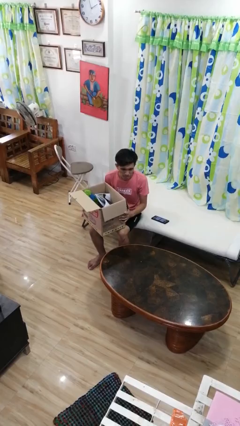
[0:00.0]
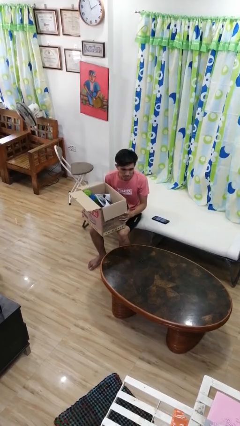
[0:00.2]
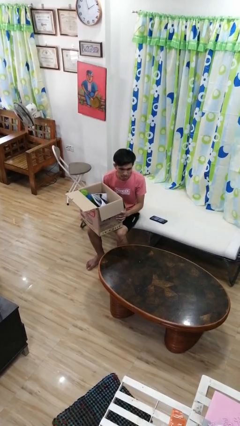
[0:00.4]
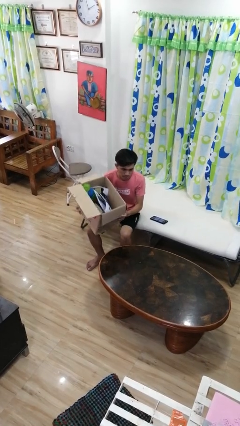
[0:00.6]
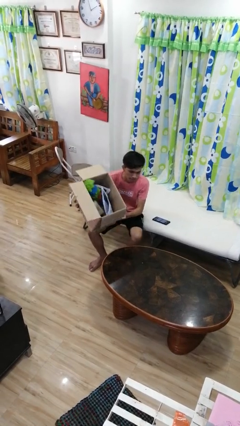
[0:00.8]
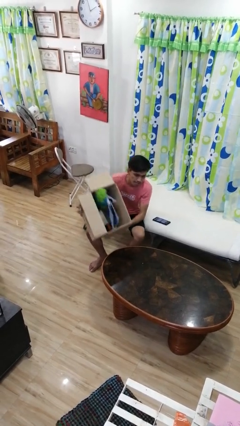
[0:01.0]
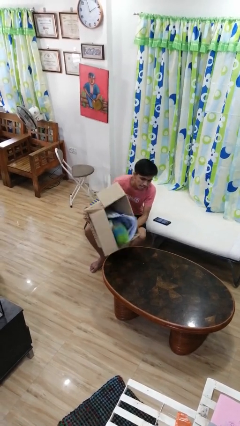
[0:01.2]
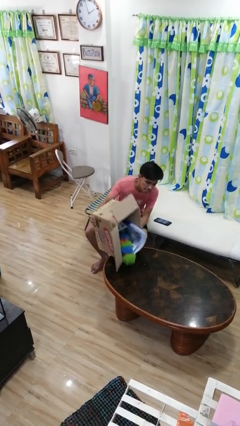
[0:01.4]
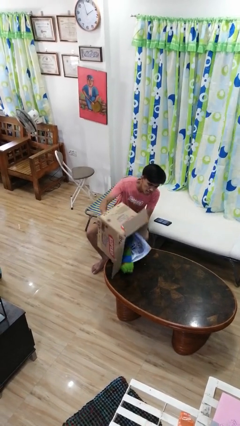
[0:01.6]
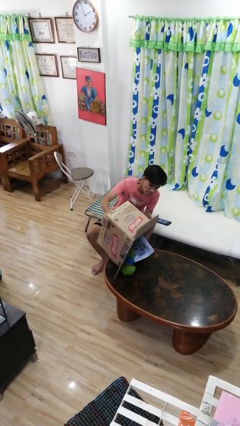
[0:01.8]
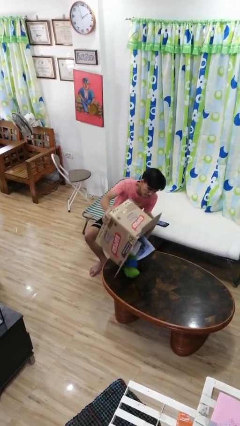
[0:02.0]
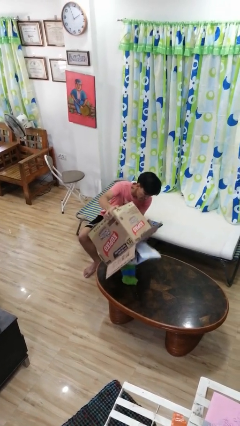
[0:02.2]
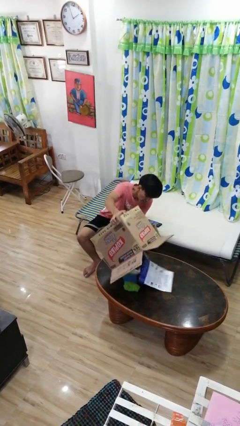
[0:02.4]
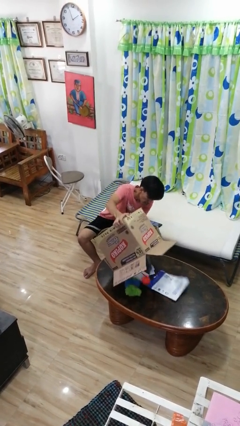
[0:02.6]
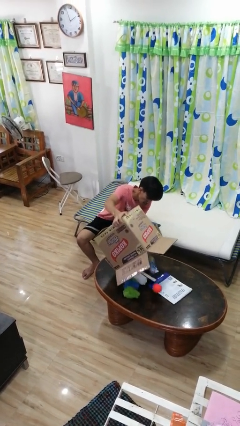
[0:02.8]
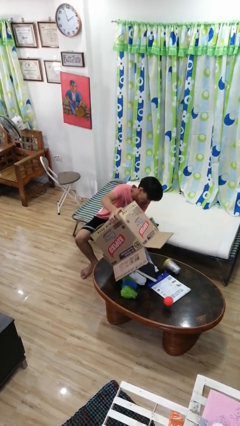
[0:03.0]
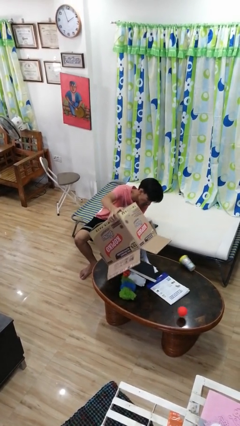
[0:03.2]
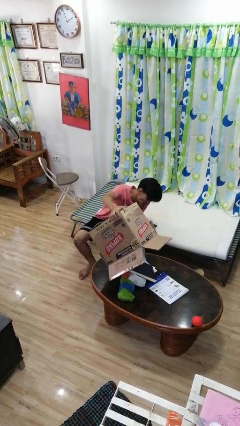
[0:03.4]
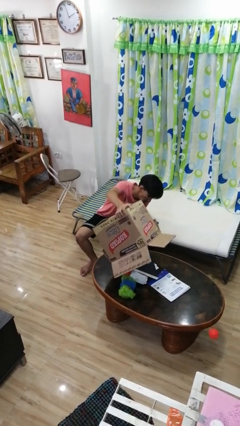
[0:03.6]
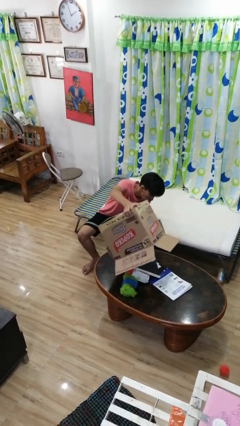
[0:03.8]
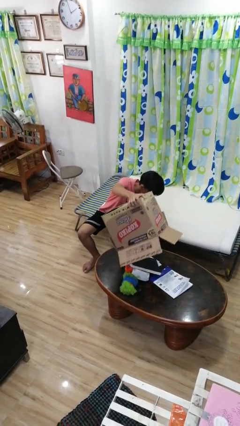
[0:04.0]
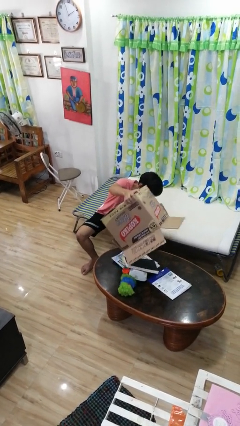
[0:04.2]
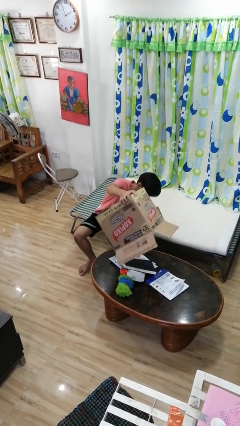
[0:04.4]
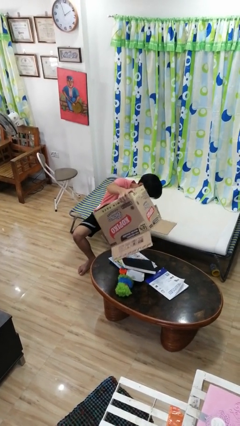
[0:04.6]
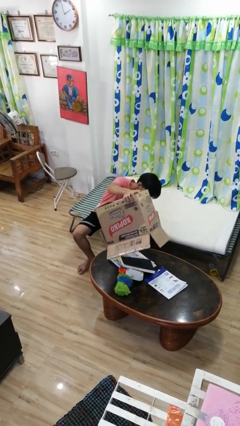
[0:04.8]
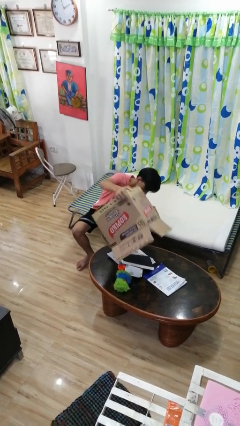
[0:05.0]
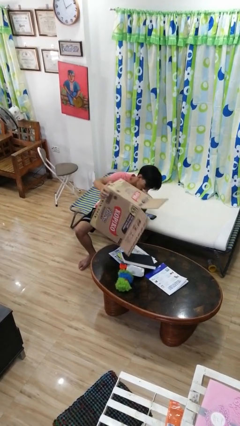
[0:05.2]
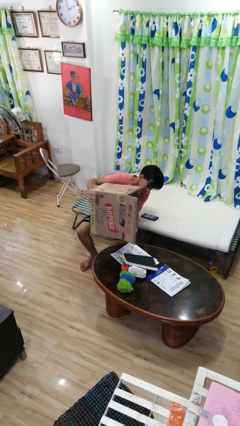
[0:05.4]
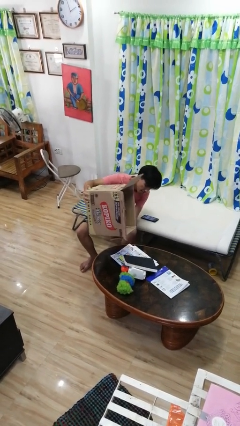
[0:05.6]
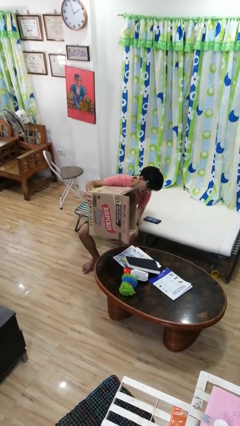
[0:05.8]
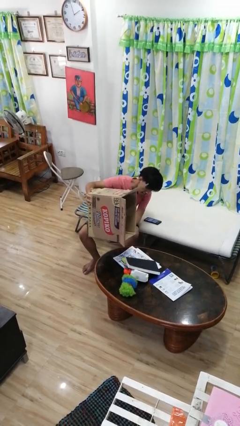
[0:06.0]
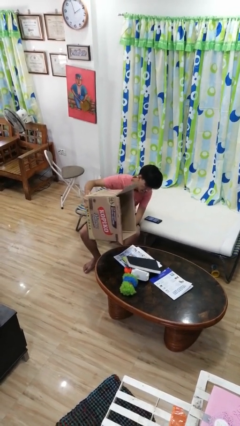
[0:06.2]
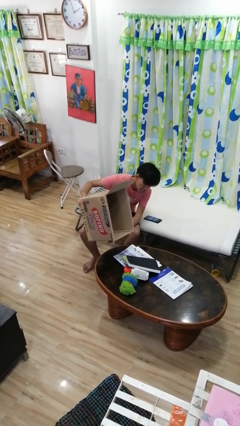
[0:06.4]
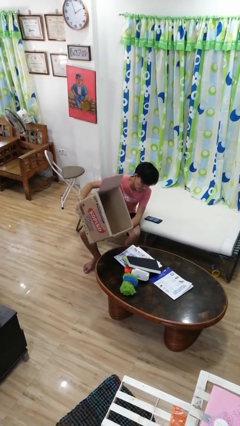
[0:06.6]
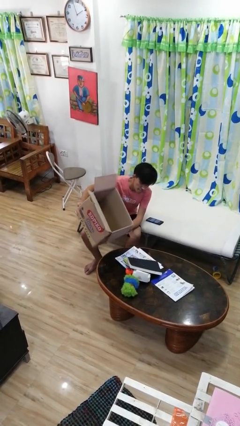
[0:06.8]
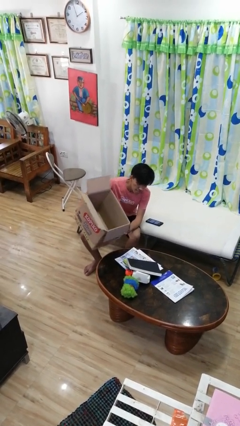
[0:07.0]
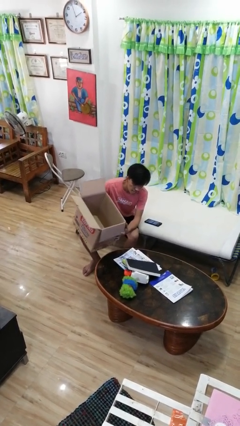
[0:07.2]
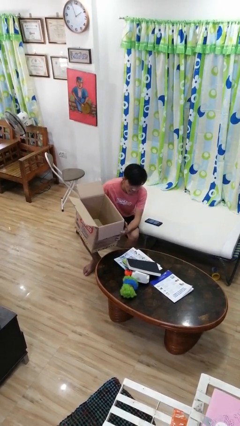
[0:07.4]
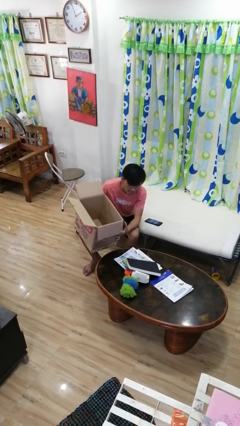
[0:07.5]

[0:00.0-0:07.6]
person unloads box onto table

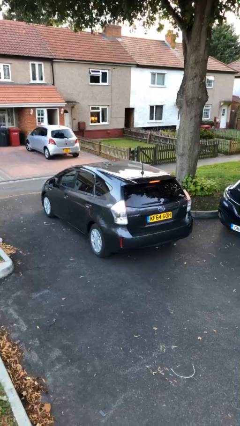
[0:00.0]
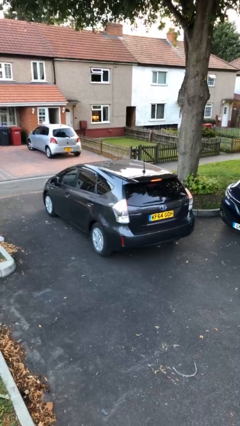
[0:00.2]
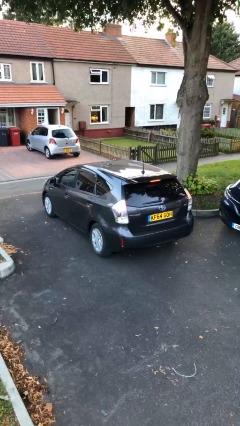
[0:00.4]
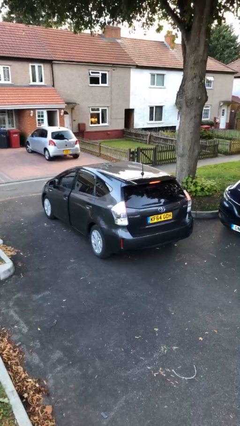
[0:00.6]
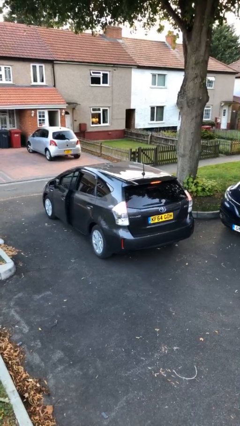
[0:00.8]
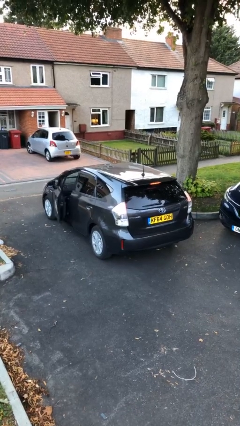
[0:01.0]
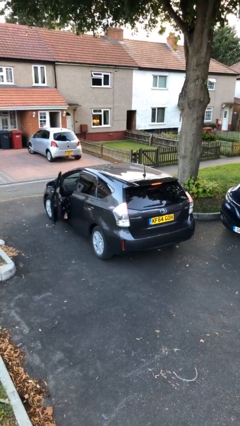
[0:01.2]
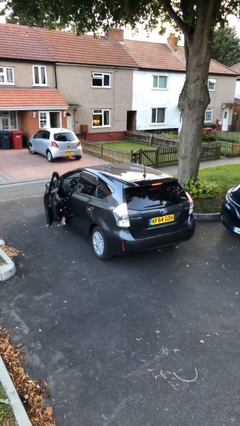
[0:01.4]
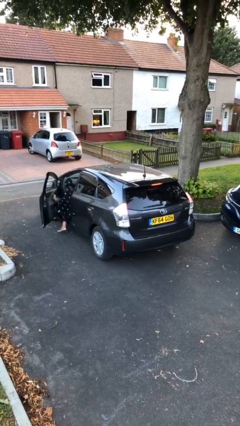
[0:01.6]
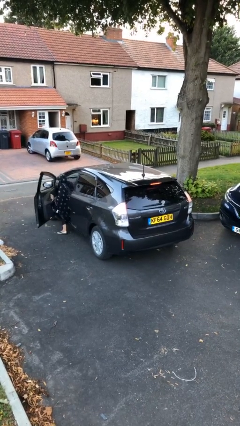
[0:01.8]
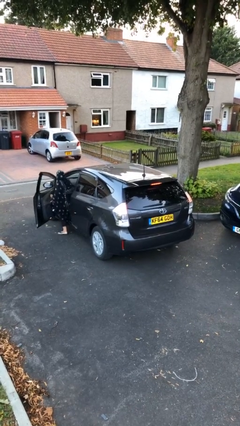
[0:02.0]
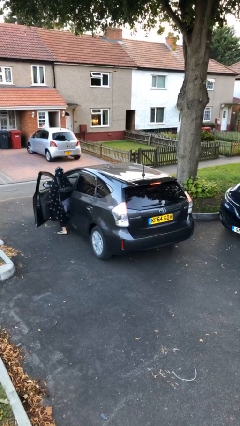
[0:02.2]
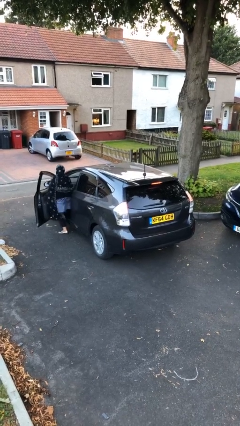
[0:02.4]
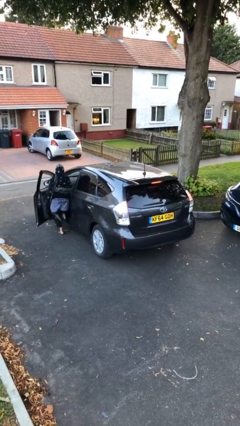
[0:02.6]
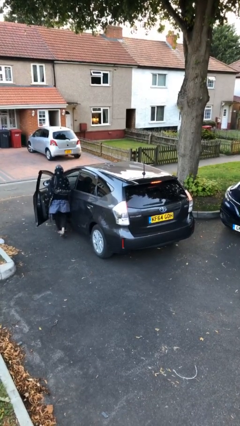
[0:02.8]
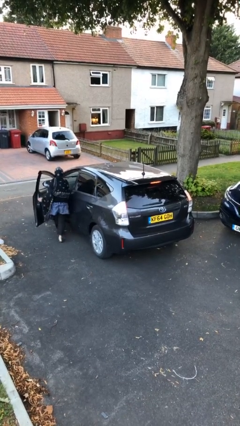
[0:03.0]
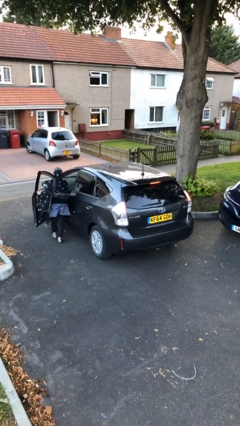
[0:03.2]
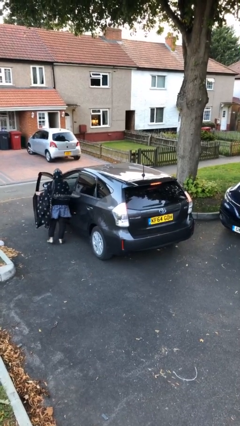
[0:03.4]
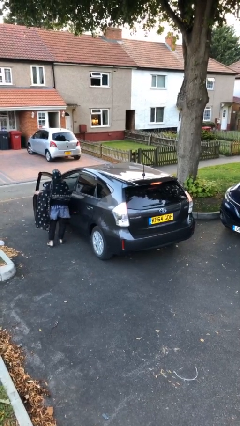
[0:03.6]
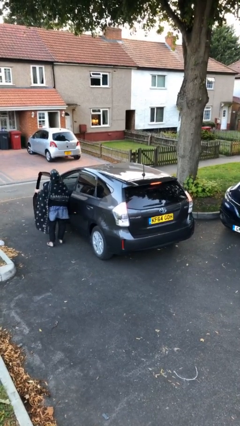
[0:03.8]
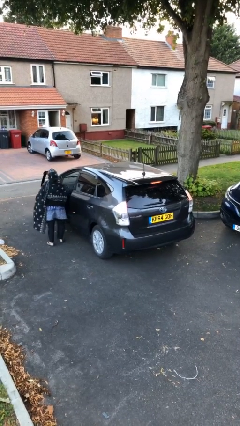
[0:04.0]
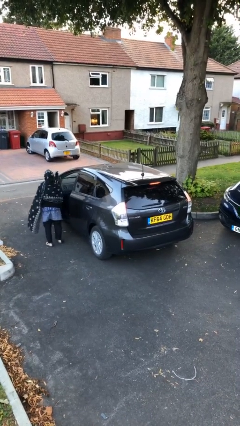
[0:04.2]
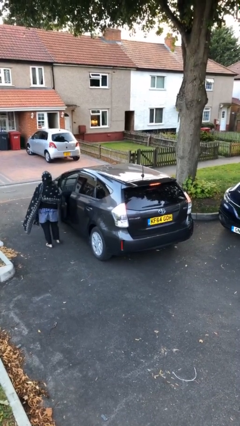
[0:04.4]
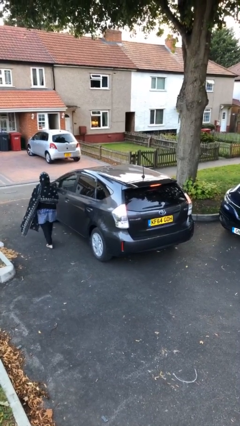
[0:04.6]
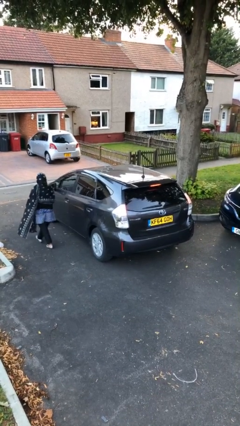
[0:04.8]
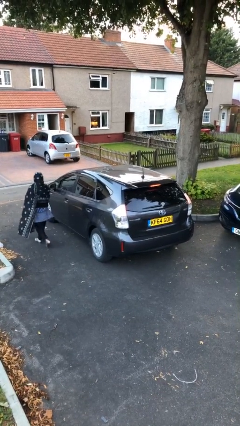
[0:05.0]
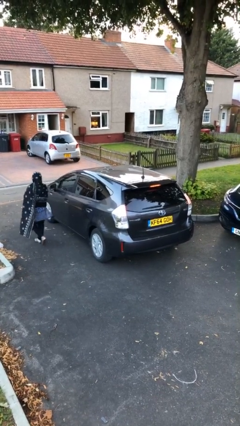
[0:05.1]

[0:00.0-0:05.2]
car drops off person

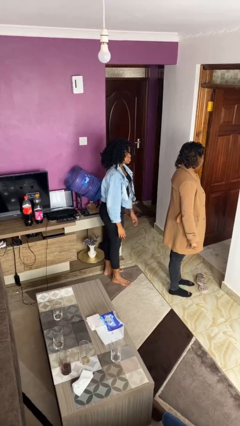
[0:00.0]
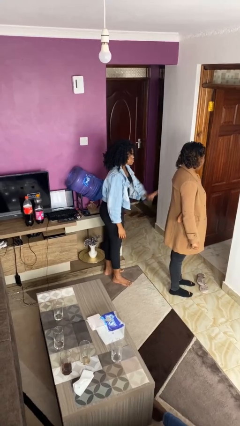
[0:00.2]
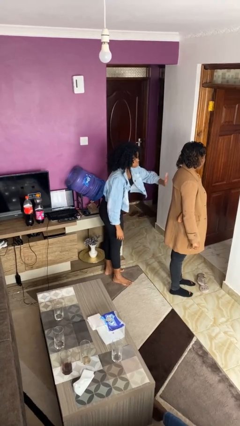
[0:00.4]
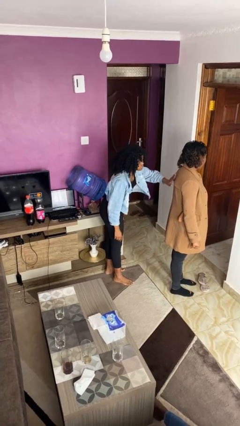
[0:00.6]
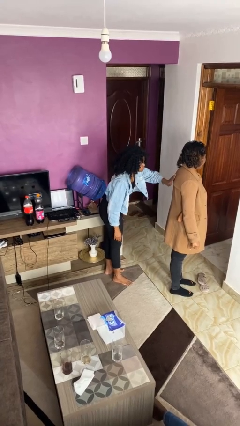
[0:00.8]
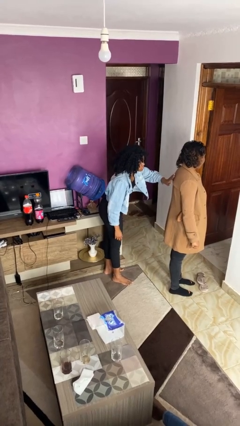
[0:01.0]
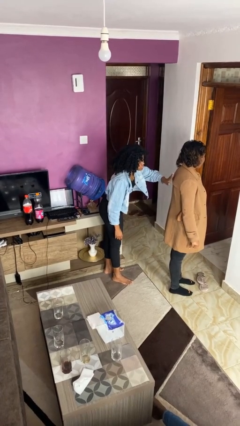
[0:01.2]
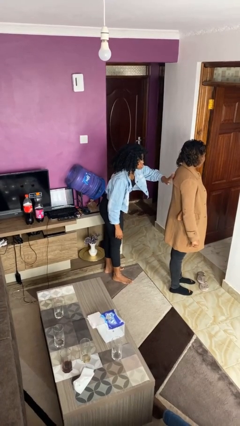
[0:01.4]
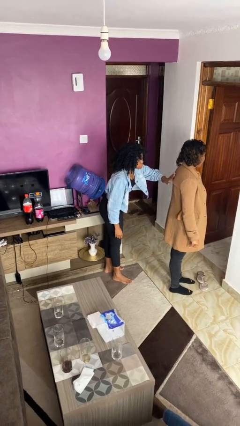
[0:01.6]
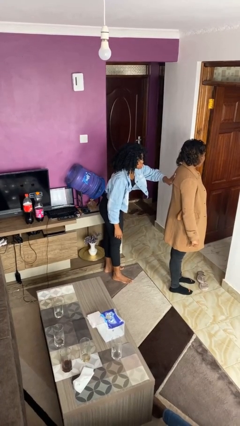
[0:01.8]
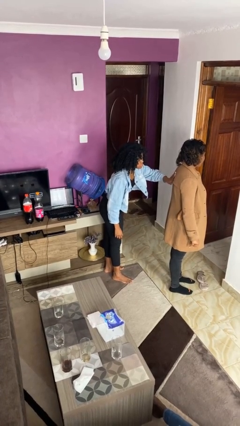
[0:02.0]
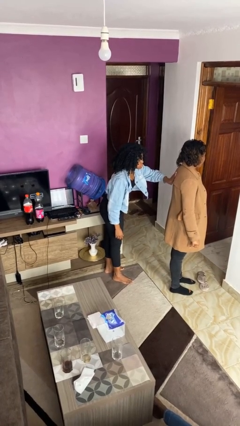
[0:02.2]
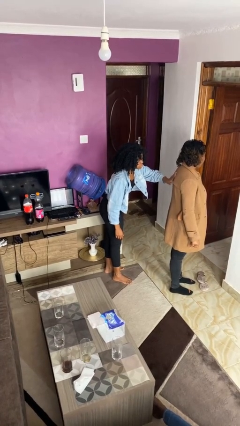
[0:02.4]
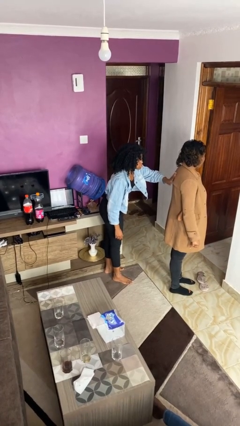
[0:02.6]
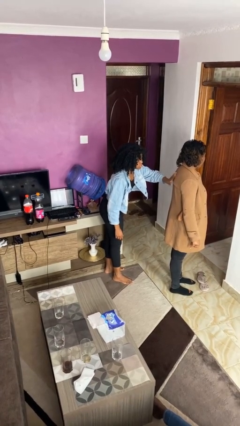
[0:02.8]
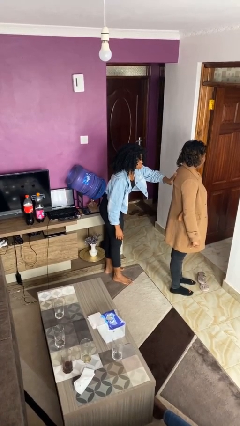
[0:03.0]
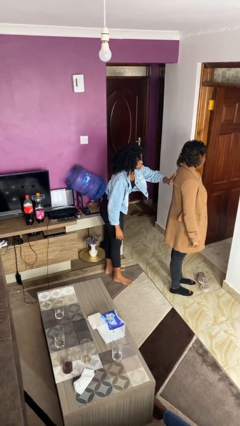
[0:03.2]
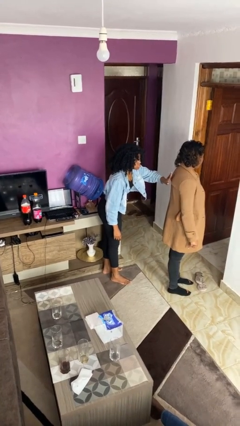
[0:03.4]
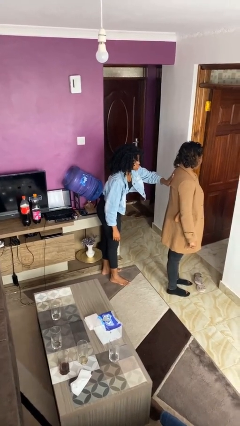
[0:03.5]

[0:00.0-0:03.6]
person touches back of person

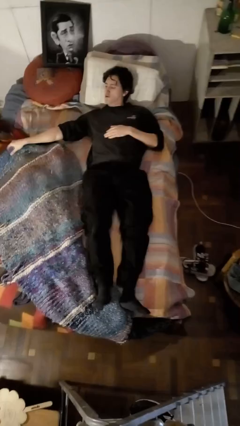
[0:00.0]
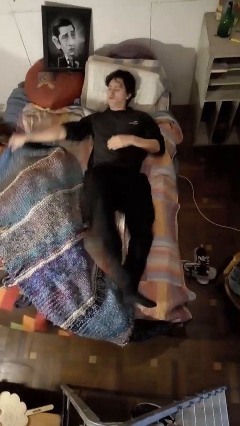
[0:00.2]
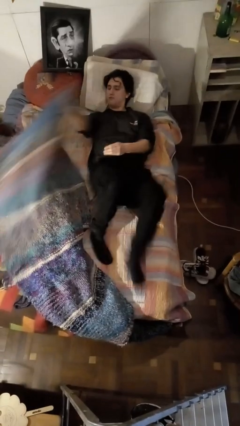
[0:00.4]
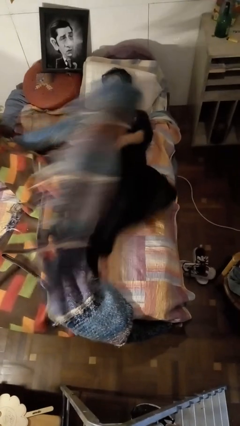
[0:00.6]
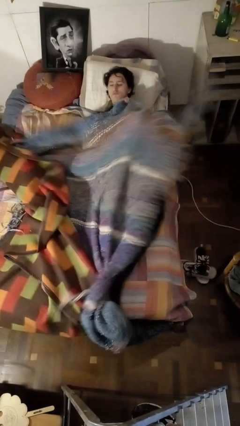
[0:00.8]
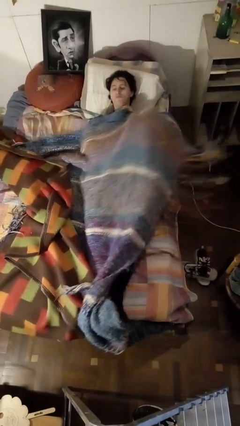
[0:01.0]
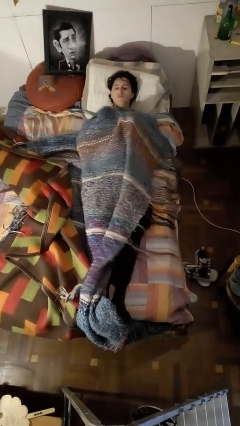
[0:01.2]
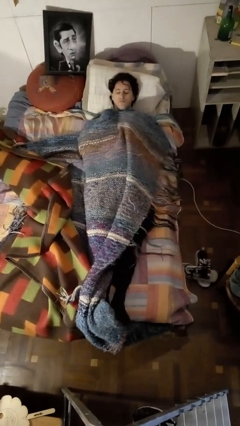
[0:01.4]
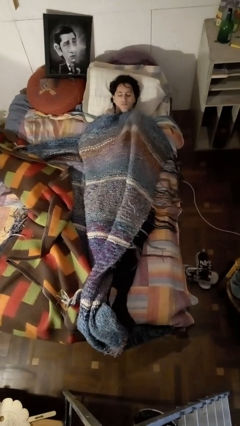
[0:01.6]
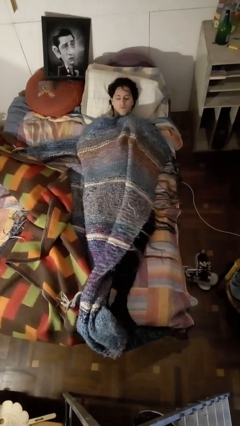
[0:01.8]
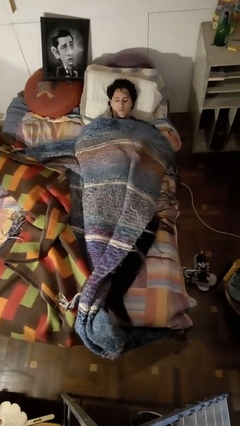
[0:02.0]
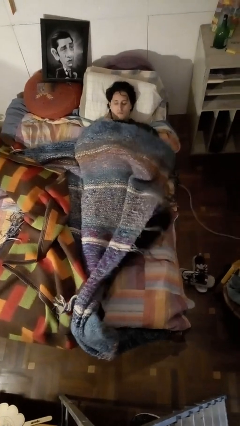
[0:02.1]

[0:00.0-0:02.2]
person covers with bedsheets
